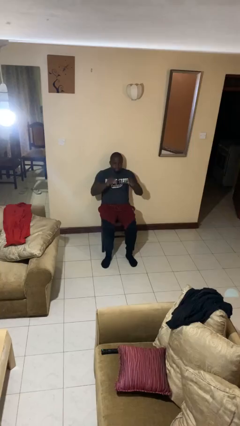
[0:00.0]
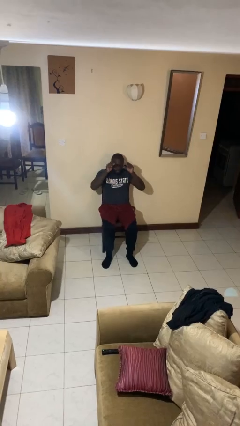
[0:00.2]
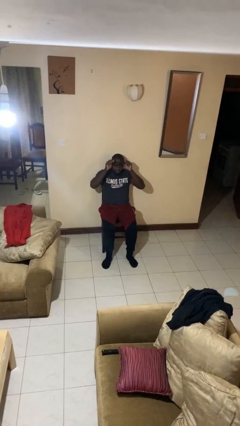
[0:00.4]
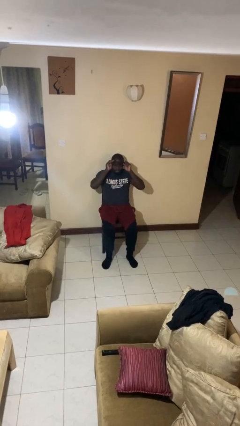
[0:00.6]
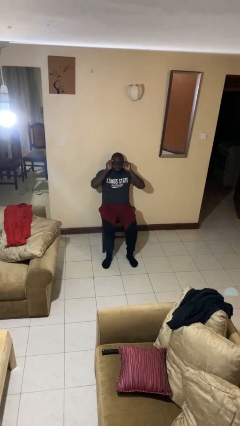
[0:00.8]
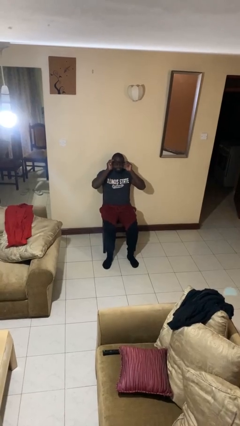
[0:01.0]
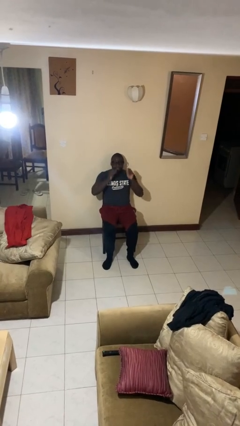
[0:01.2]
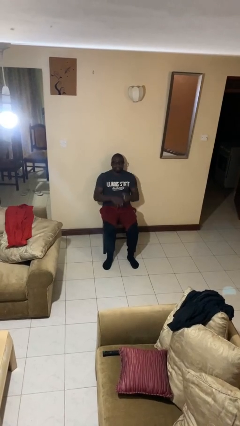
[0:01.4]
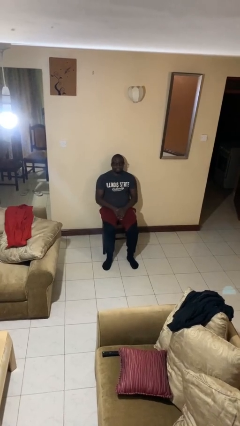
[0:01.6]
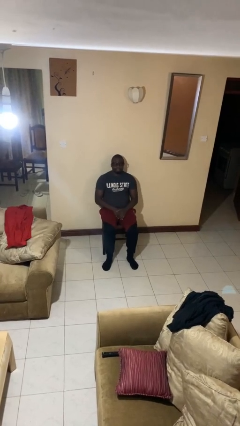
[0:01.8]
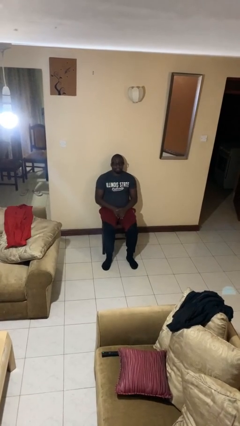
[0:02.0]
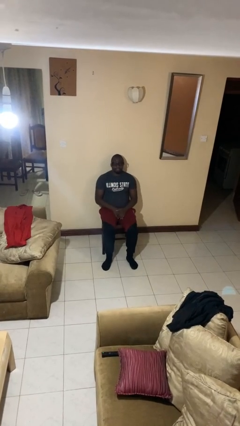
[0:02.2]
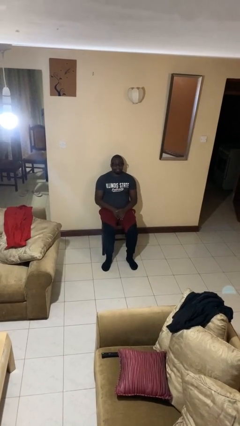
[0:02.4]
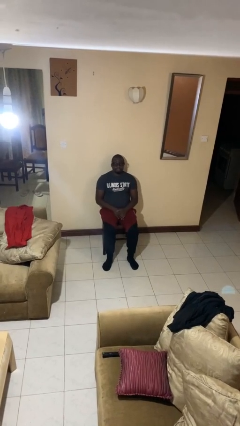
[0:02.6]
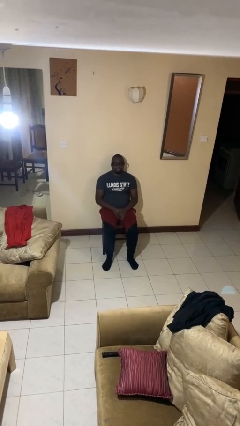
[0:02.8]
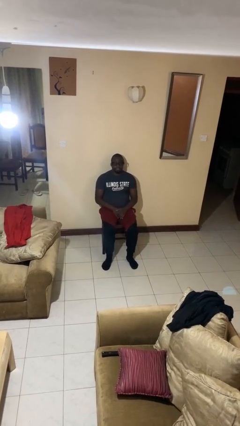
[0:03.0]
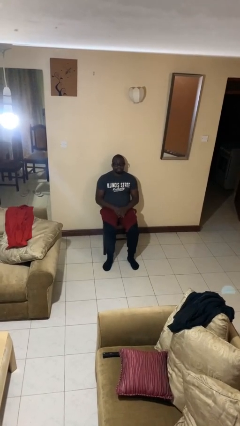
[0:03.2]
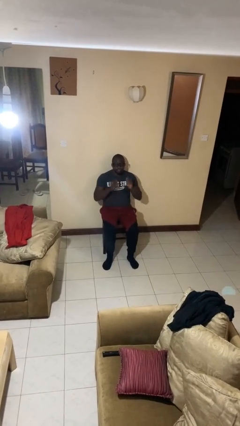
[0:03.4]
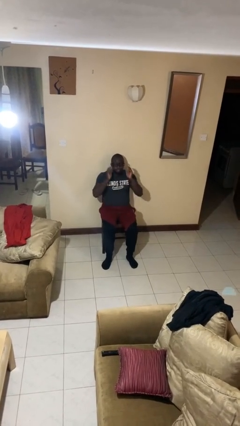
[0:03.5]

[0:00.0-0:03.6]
person puts on glasses

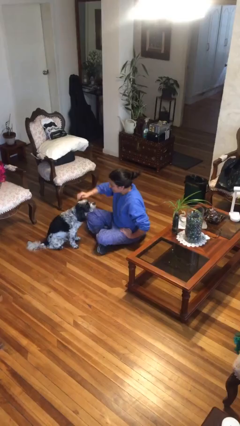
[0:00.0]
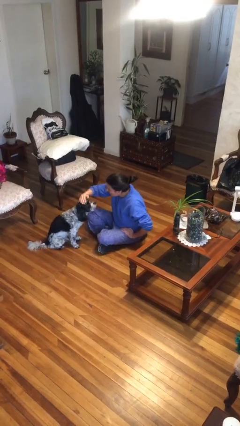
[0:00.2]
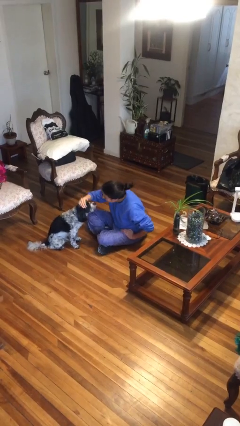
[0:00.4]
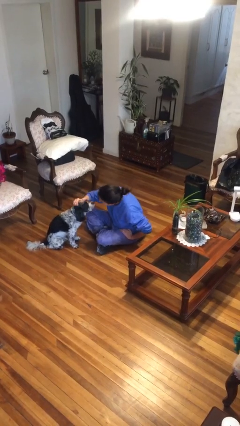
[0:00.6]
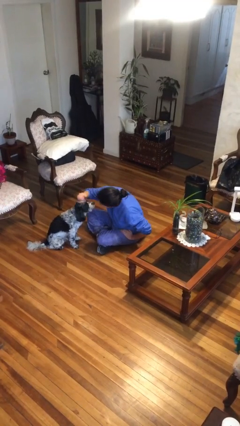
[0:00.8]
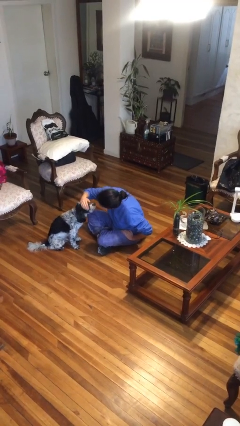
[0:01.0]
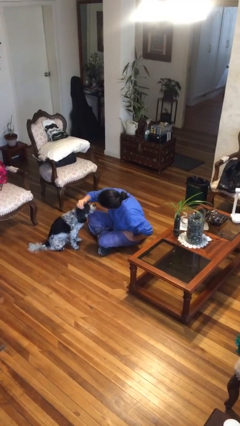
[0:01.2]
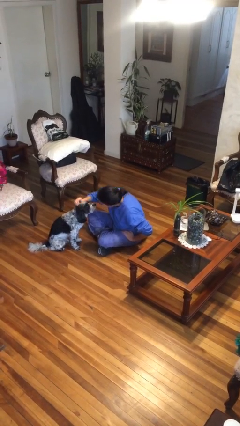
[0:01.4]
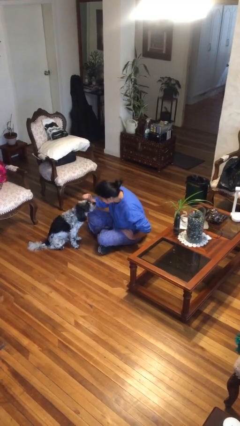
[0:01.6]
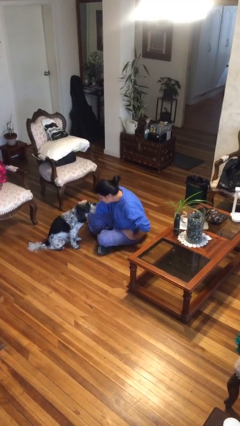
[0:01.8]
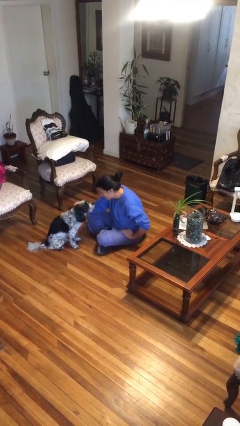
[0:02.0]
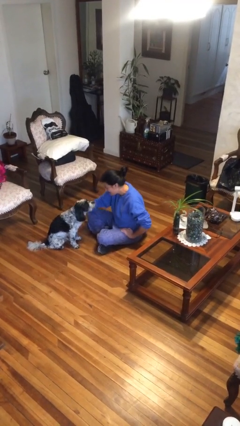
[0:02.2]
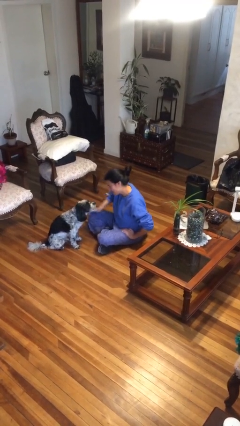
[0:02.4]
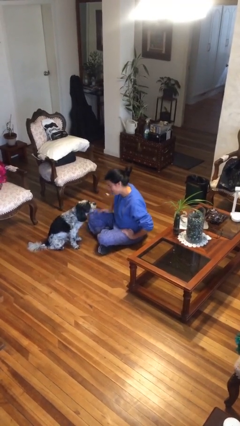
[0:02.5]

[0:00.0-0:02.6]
person pets dog

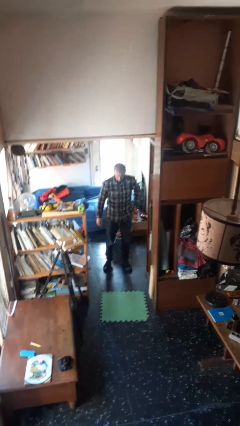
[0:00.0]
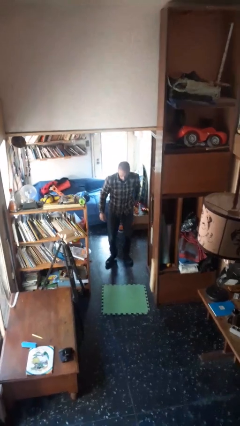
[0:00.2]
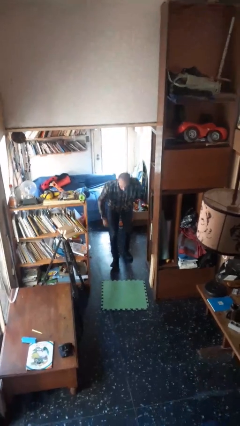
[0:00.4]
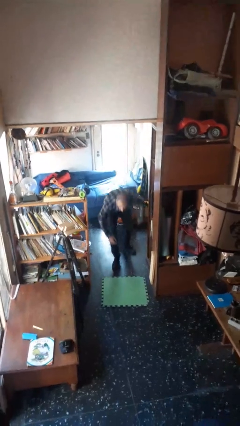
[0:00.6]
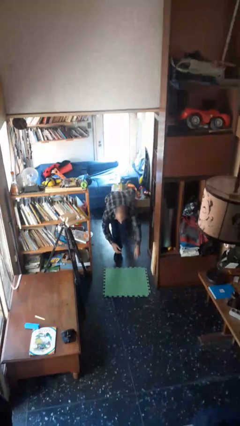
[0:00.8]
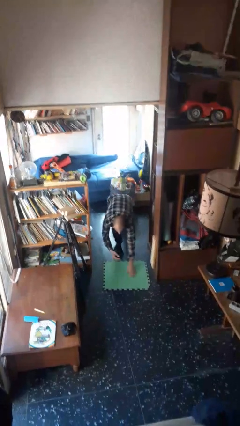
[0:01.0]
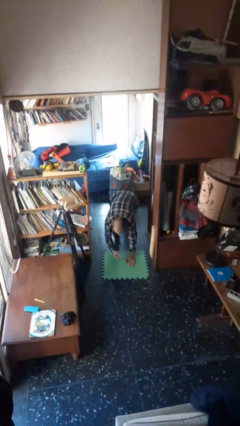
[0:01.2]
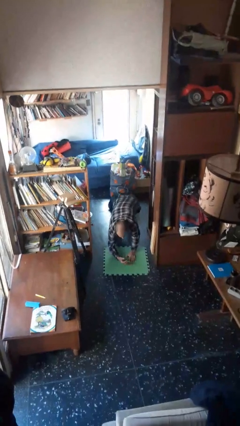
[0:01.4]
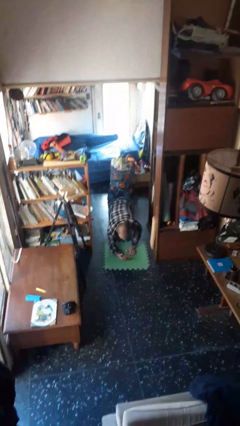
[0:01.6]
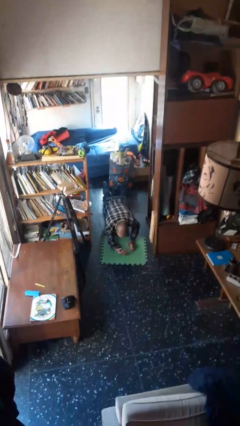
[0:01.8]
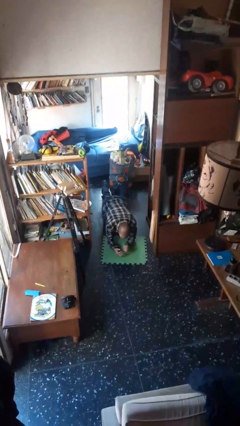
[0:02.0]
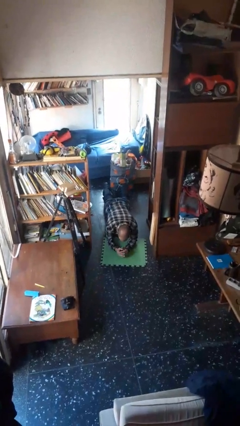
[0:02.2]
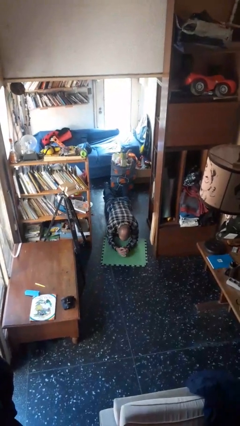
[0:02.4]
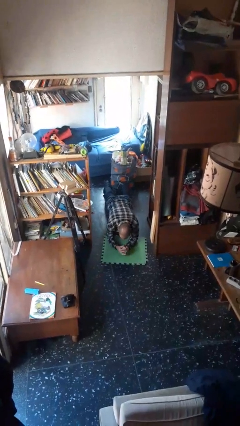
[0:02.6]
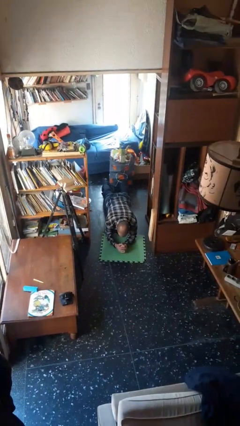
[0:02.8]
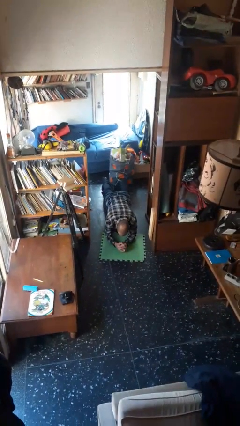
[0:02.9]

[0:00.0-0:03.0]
person exercises with plank

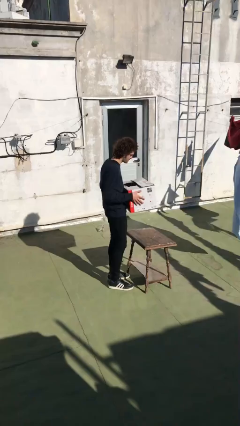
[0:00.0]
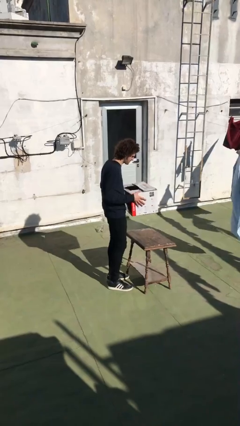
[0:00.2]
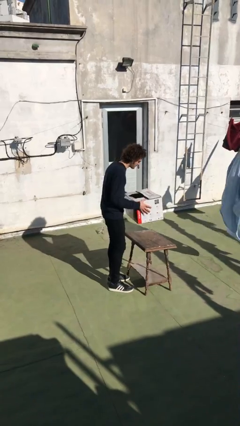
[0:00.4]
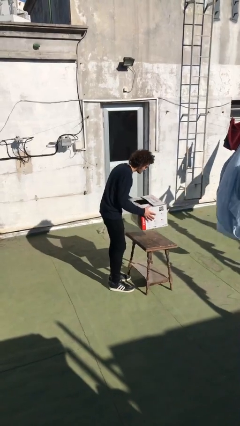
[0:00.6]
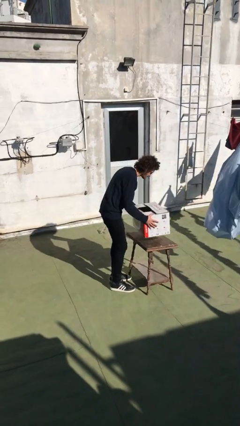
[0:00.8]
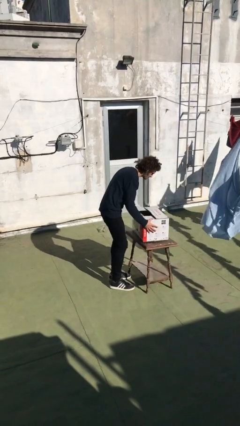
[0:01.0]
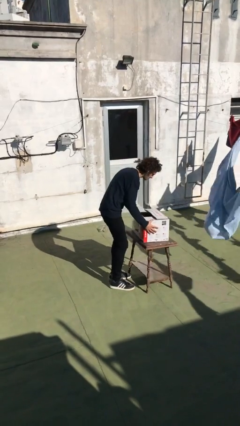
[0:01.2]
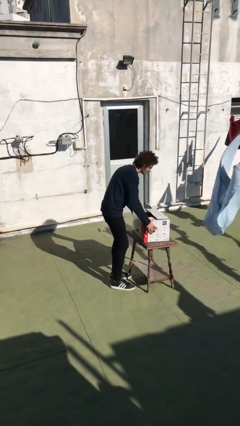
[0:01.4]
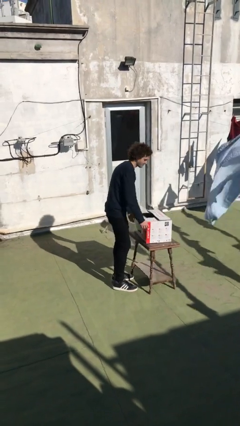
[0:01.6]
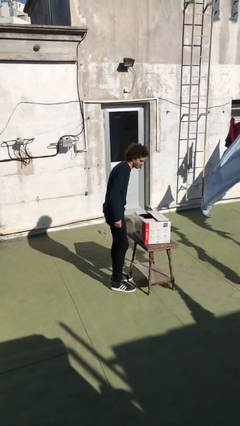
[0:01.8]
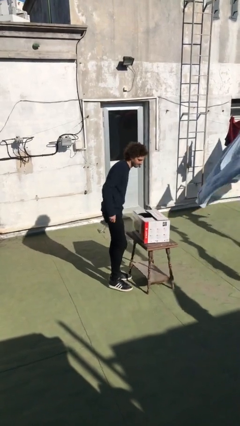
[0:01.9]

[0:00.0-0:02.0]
person puts down object on table

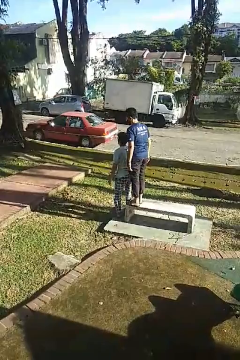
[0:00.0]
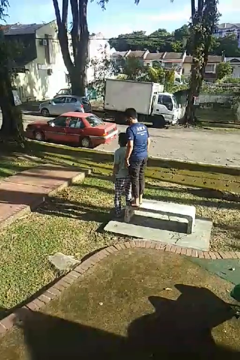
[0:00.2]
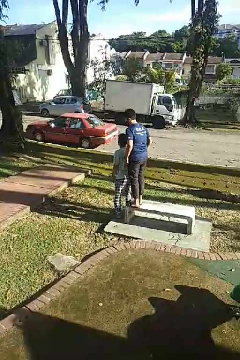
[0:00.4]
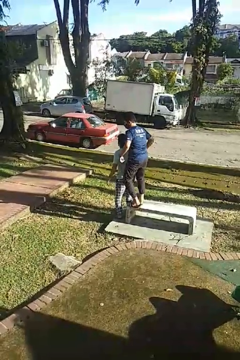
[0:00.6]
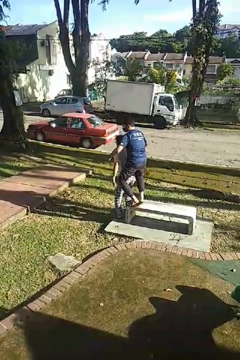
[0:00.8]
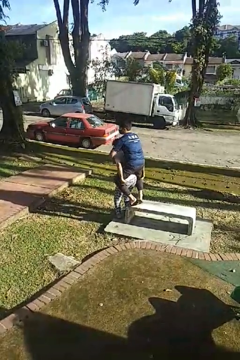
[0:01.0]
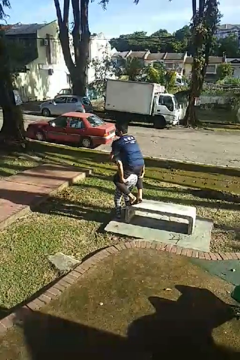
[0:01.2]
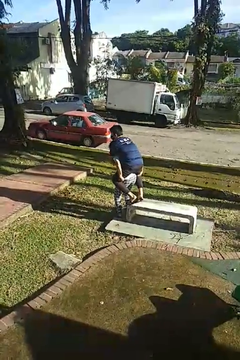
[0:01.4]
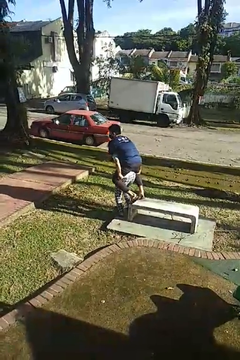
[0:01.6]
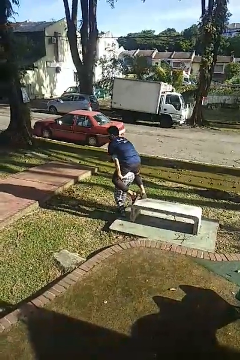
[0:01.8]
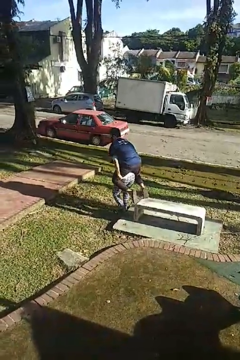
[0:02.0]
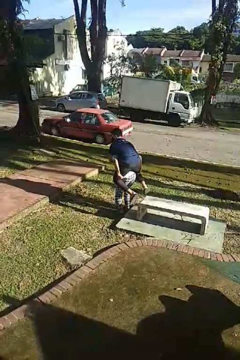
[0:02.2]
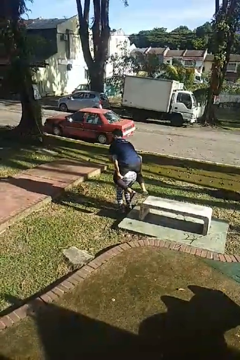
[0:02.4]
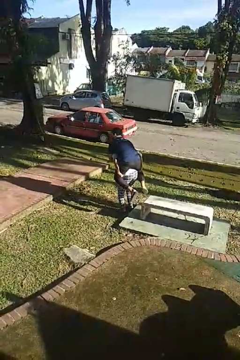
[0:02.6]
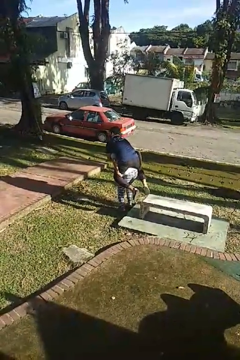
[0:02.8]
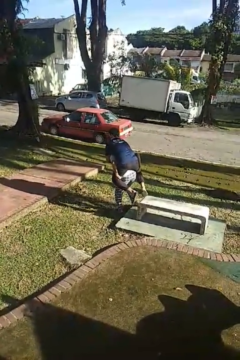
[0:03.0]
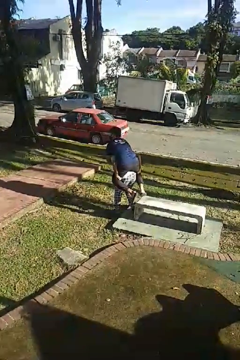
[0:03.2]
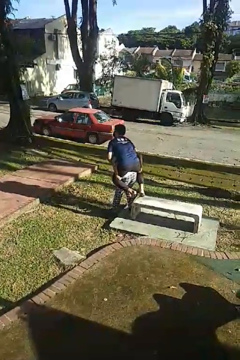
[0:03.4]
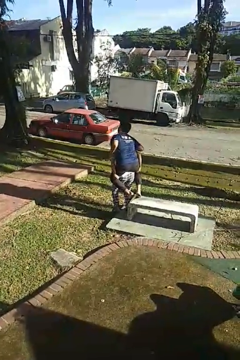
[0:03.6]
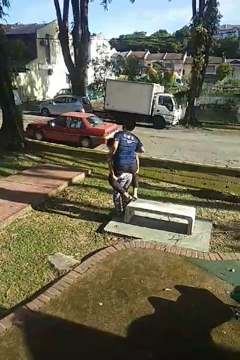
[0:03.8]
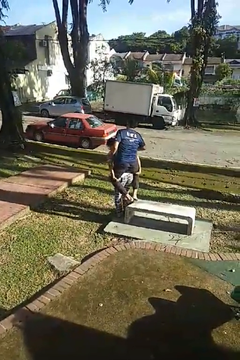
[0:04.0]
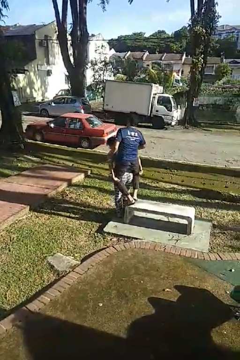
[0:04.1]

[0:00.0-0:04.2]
person carries person on back

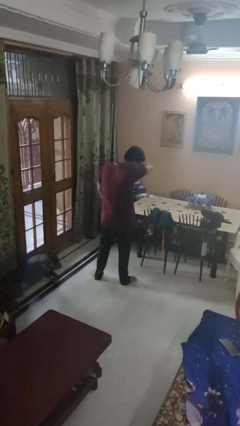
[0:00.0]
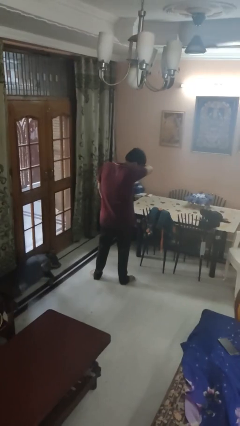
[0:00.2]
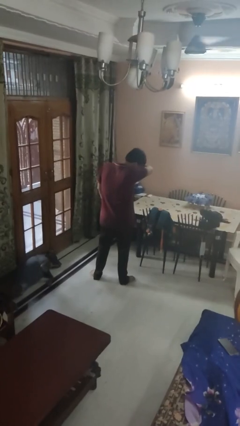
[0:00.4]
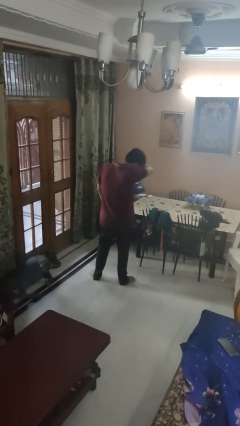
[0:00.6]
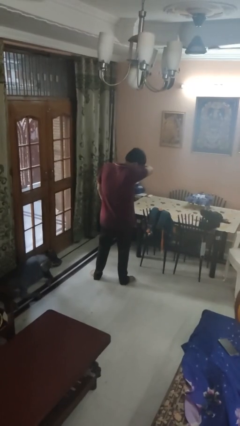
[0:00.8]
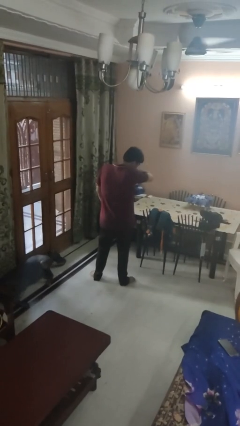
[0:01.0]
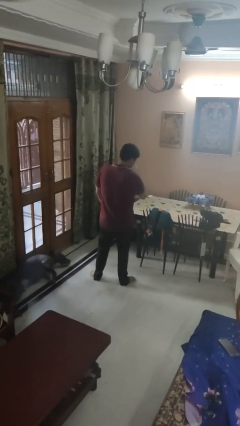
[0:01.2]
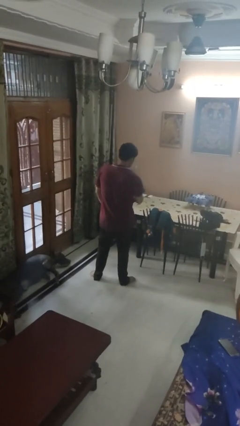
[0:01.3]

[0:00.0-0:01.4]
person sneezes into arm

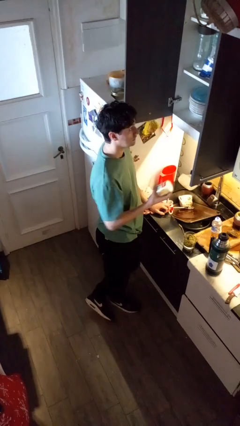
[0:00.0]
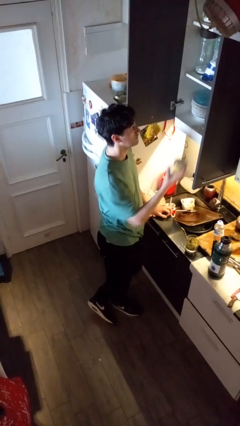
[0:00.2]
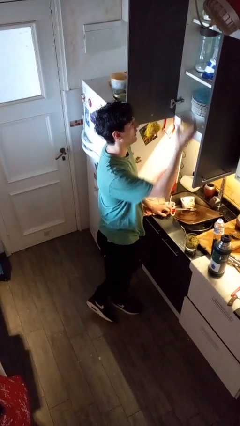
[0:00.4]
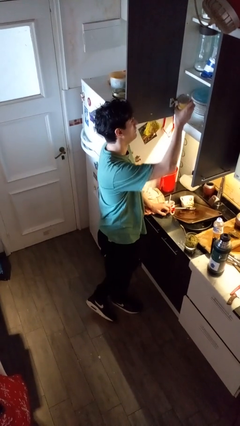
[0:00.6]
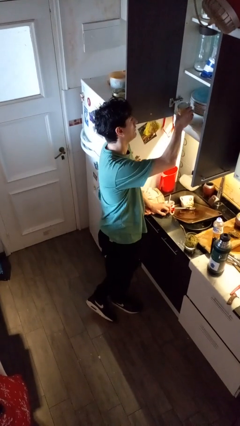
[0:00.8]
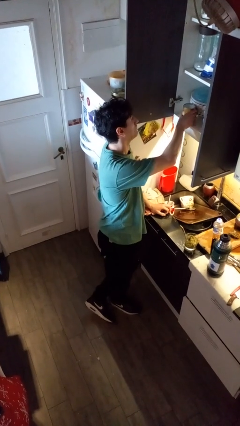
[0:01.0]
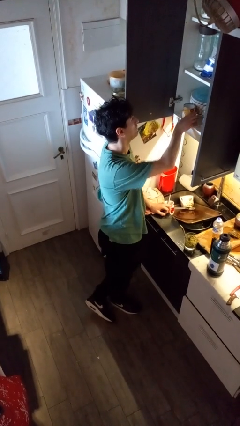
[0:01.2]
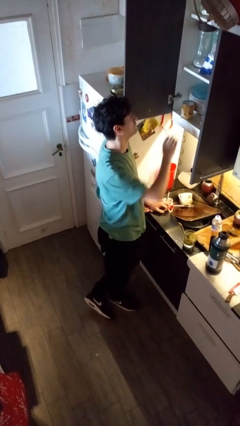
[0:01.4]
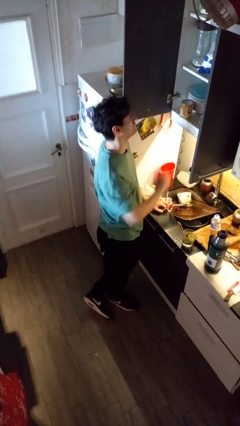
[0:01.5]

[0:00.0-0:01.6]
person puts object into kitchen drawer
